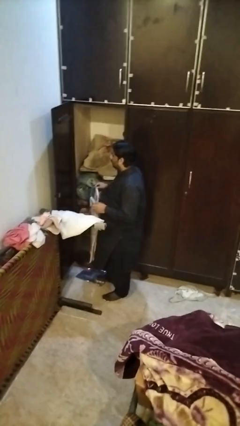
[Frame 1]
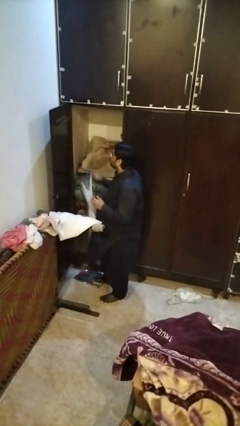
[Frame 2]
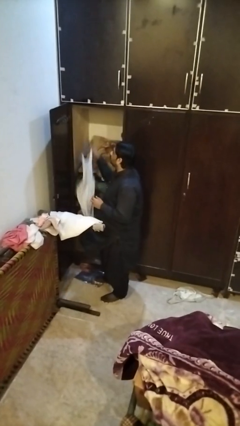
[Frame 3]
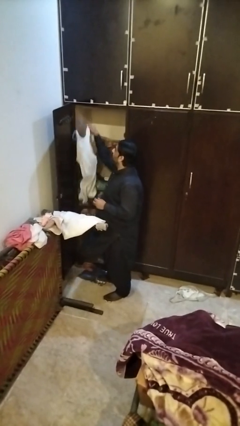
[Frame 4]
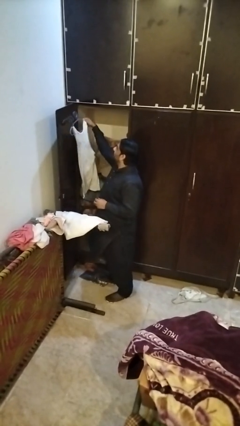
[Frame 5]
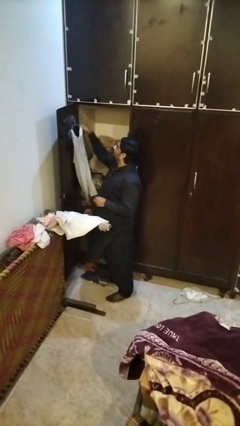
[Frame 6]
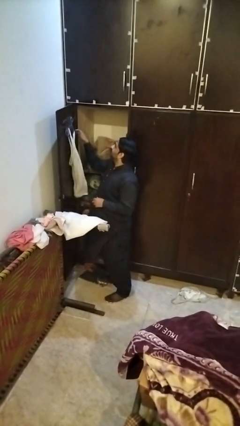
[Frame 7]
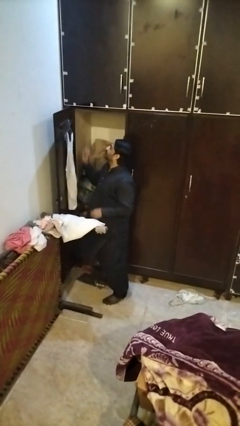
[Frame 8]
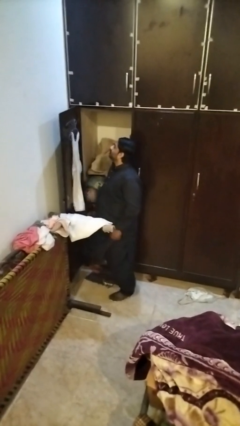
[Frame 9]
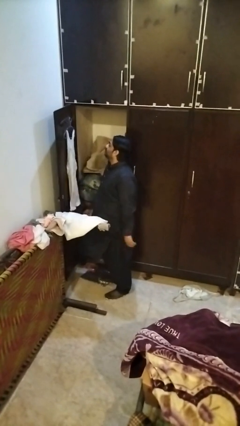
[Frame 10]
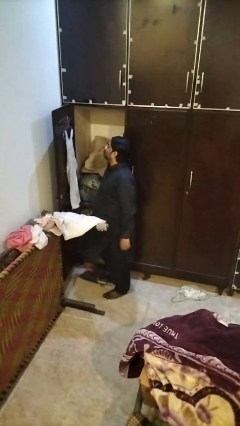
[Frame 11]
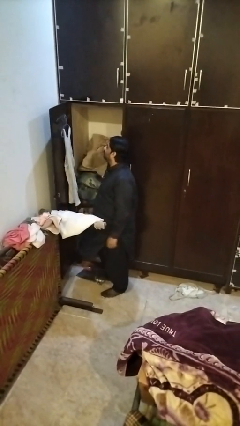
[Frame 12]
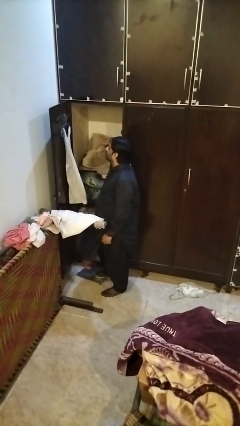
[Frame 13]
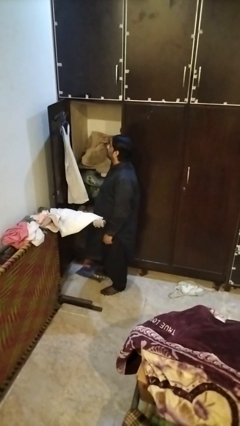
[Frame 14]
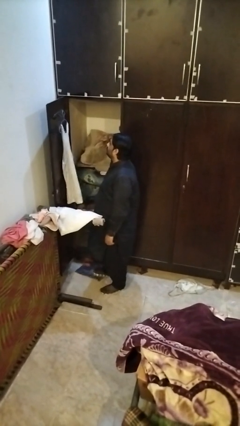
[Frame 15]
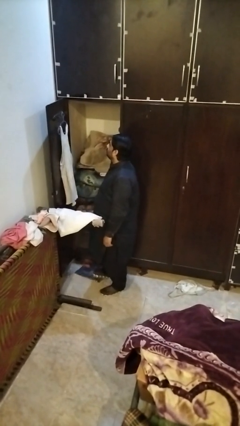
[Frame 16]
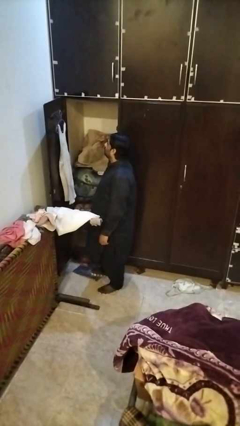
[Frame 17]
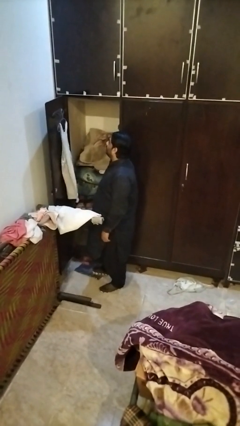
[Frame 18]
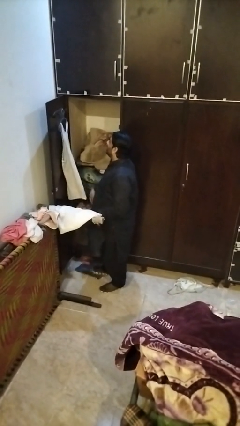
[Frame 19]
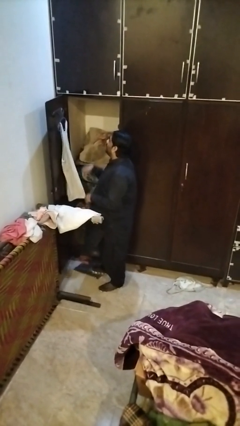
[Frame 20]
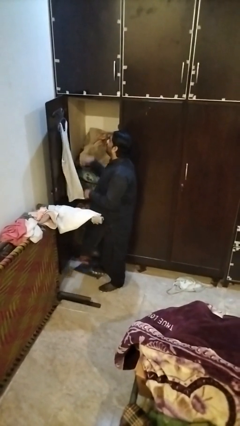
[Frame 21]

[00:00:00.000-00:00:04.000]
person puts clothes into closet

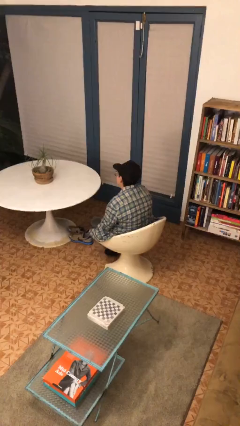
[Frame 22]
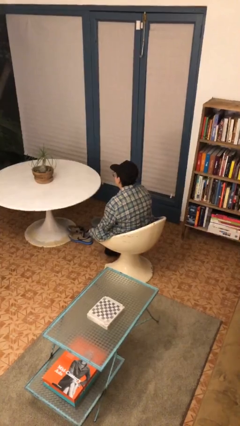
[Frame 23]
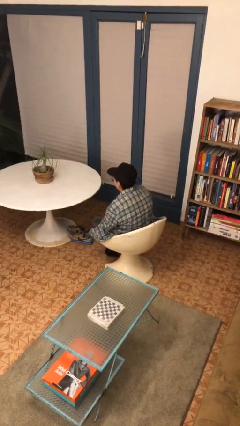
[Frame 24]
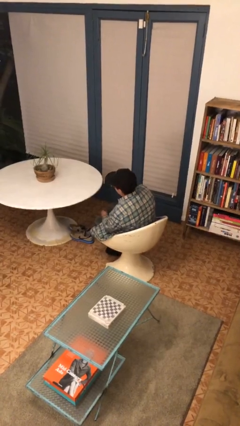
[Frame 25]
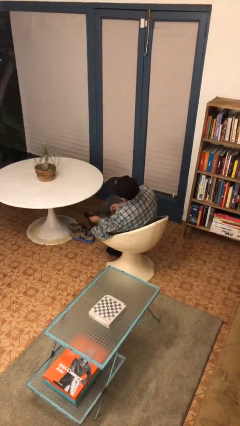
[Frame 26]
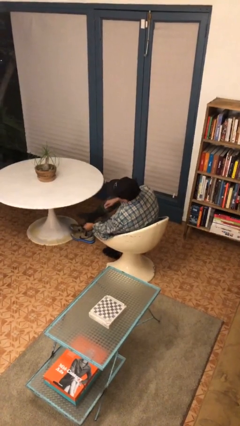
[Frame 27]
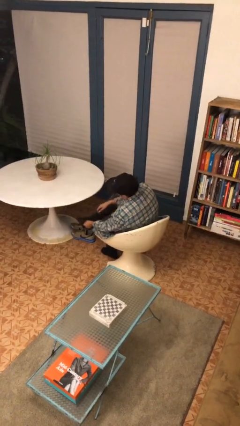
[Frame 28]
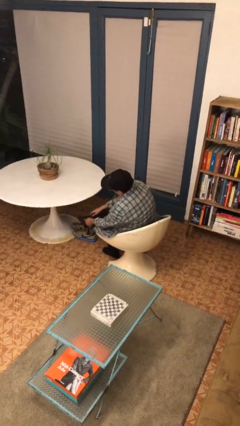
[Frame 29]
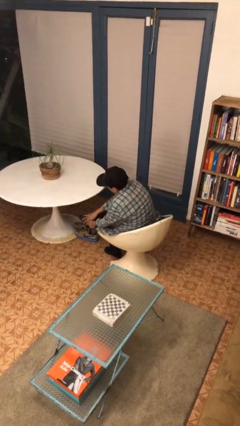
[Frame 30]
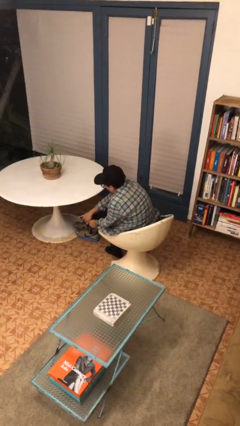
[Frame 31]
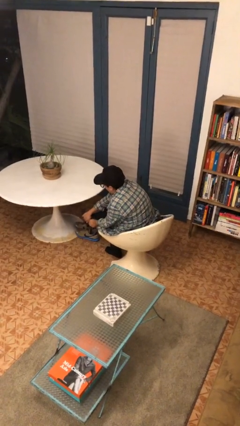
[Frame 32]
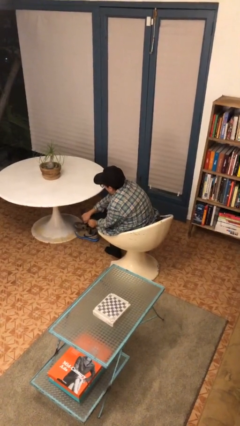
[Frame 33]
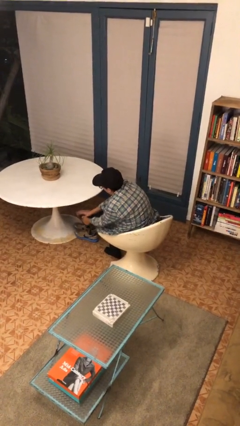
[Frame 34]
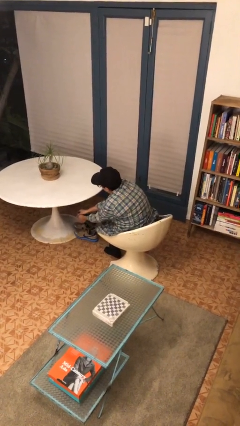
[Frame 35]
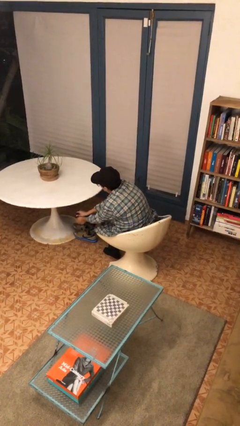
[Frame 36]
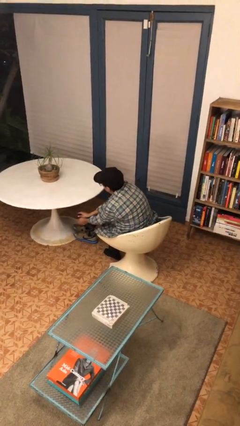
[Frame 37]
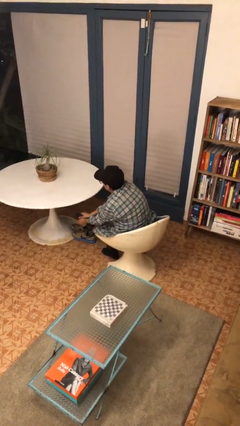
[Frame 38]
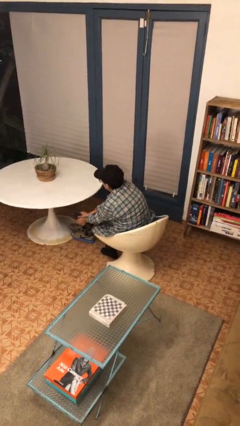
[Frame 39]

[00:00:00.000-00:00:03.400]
person rubs foot

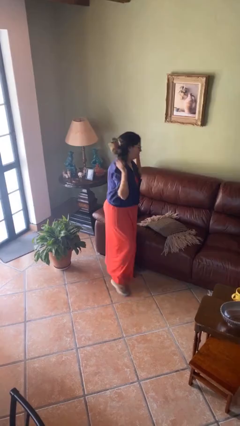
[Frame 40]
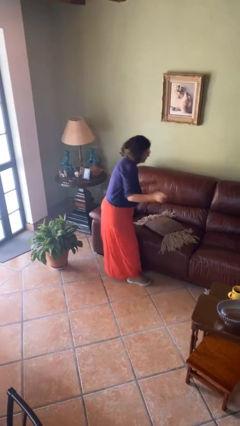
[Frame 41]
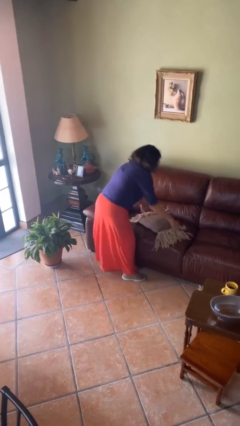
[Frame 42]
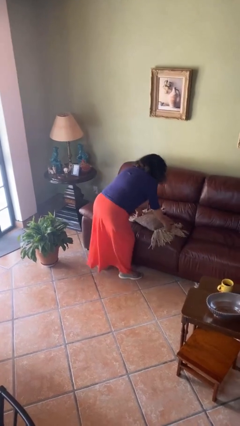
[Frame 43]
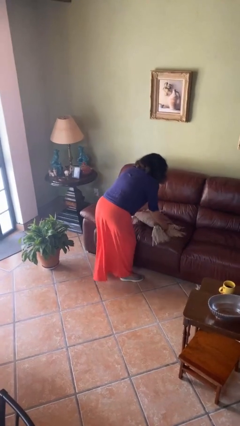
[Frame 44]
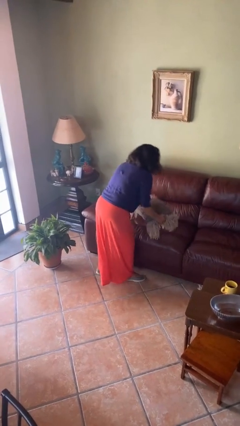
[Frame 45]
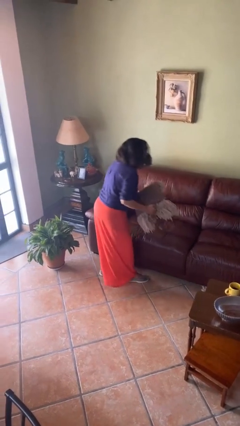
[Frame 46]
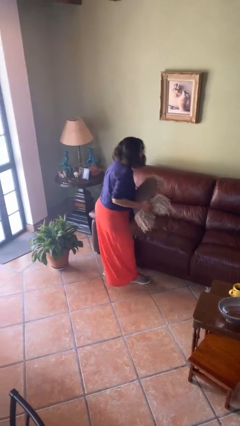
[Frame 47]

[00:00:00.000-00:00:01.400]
person picks up object from couch

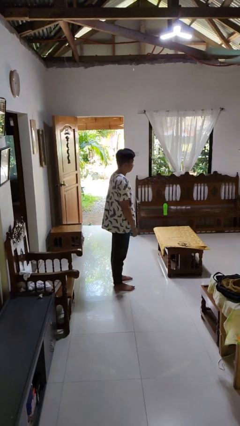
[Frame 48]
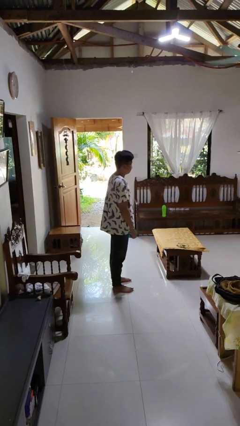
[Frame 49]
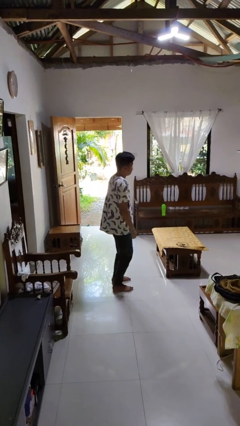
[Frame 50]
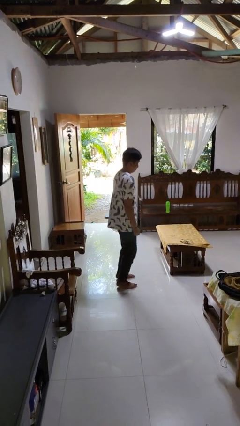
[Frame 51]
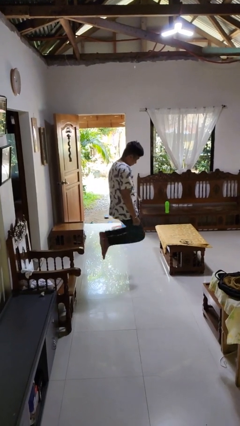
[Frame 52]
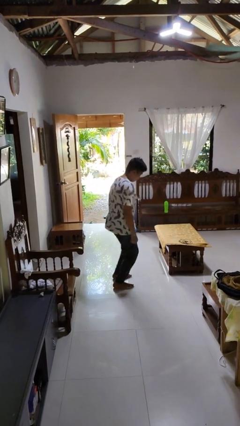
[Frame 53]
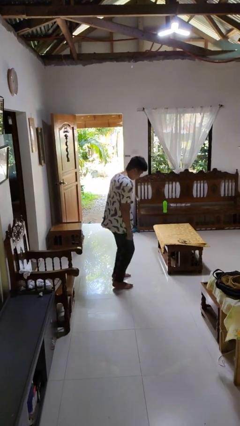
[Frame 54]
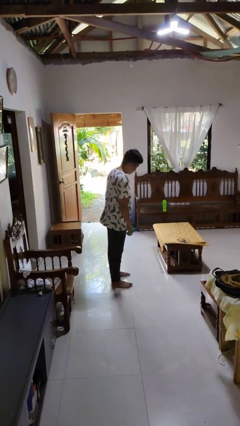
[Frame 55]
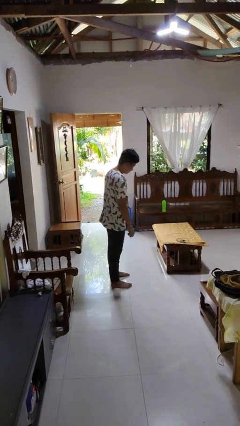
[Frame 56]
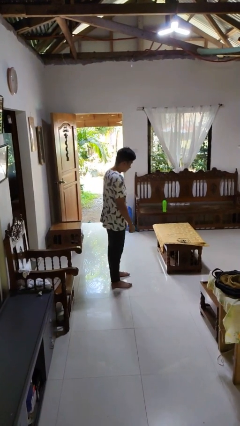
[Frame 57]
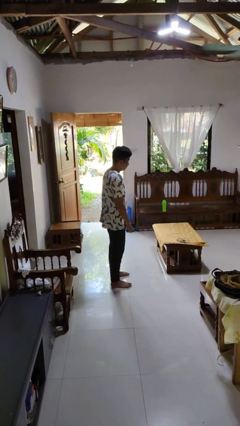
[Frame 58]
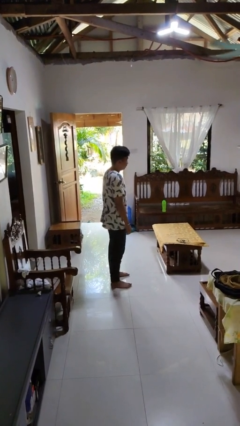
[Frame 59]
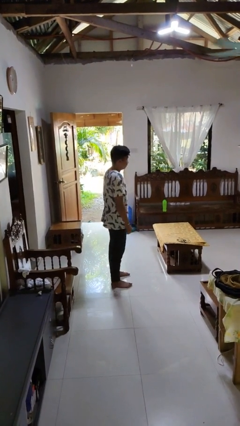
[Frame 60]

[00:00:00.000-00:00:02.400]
person jumps

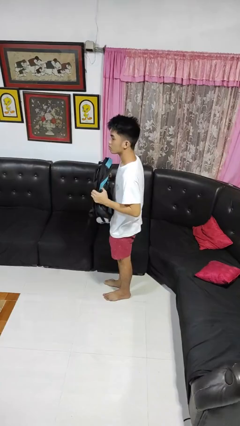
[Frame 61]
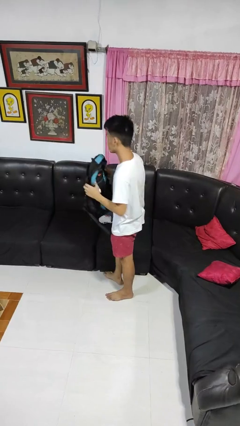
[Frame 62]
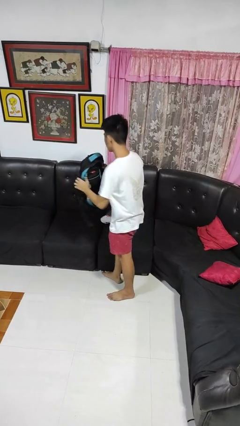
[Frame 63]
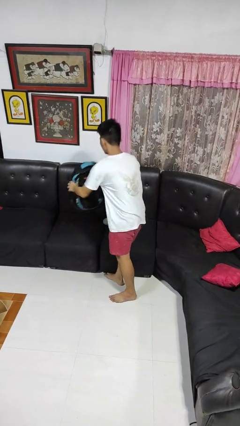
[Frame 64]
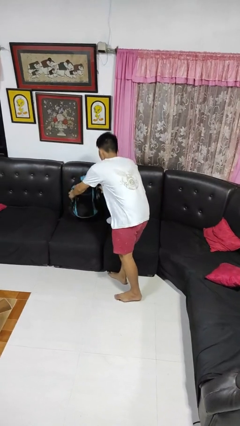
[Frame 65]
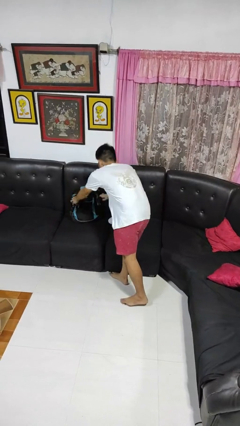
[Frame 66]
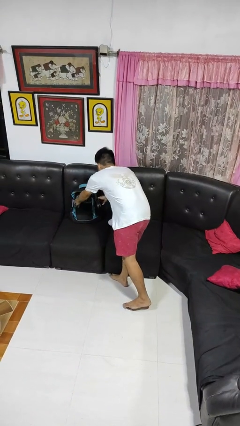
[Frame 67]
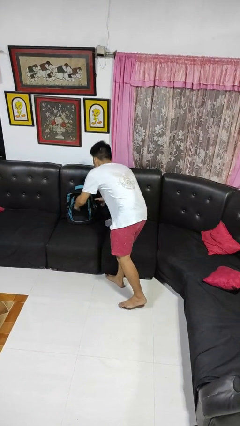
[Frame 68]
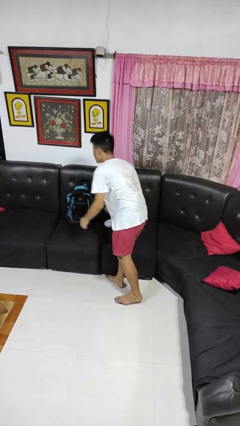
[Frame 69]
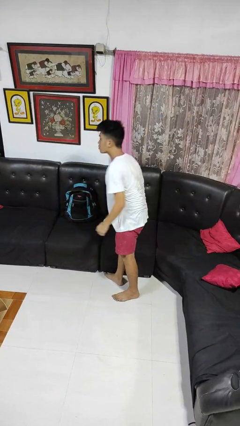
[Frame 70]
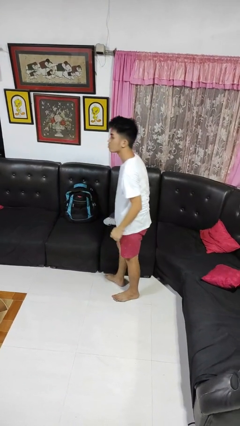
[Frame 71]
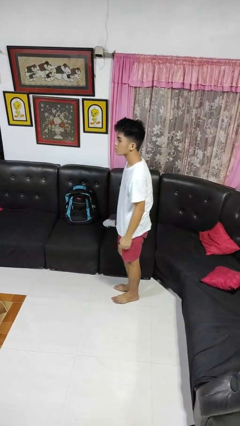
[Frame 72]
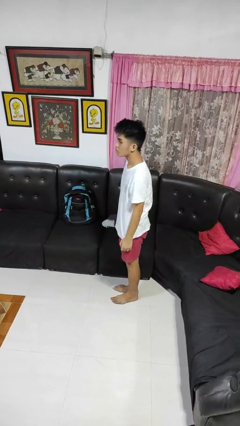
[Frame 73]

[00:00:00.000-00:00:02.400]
person puts down object on couch

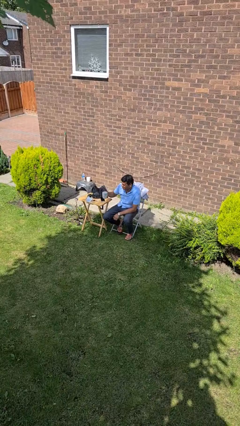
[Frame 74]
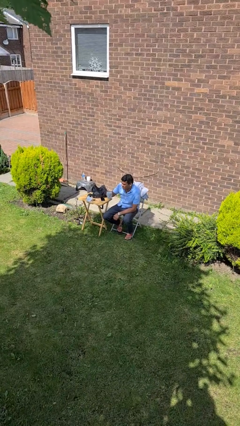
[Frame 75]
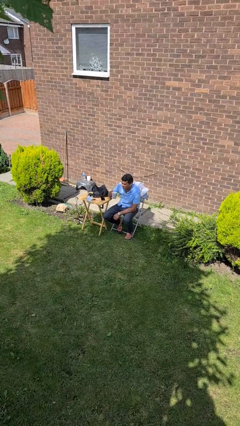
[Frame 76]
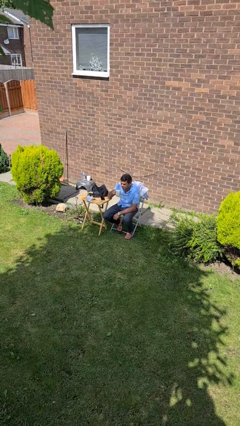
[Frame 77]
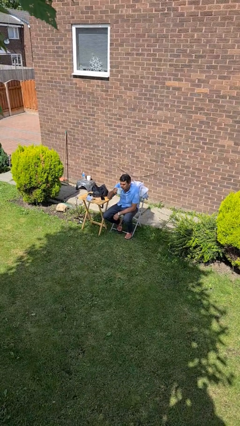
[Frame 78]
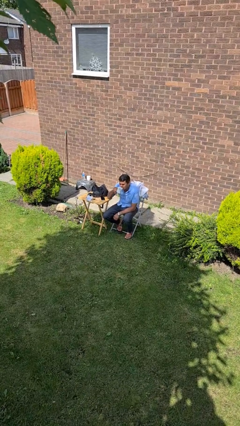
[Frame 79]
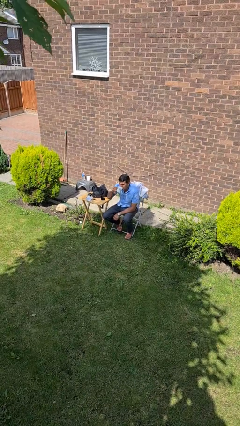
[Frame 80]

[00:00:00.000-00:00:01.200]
person drinks from mug

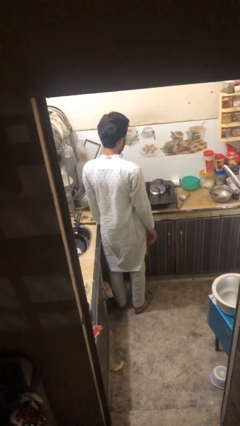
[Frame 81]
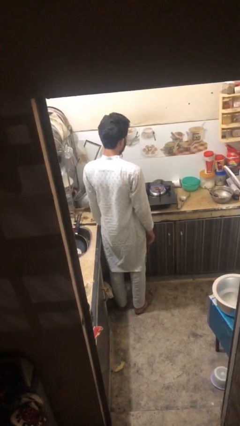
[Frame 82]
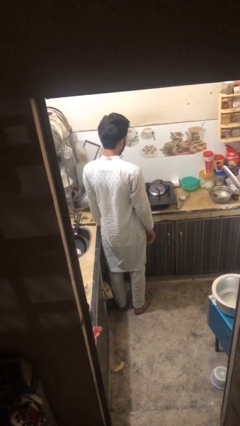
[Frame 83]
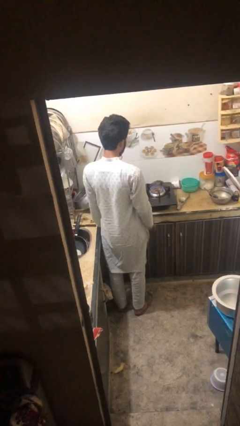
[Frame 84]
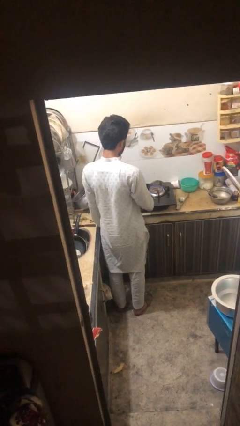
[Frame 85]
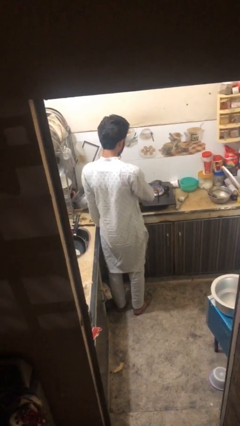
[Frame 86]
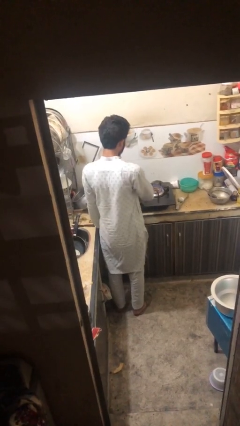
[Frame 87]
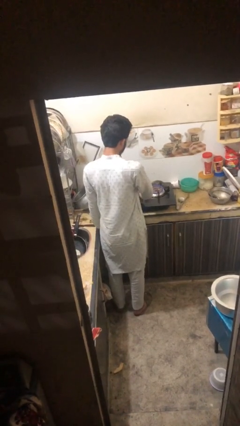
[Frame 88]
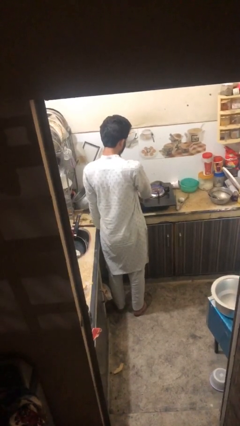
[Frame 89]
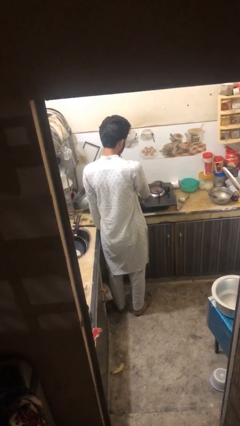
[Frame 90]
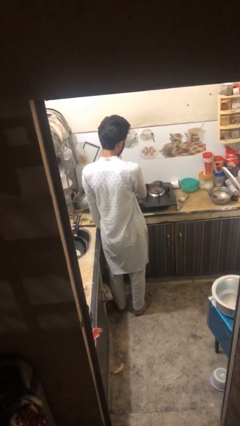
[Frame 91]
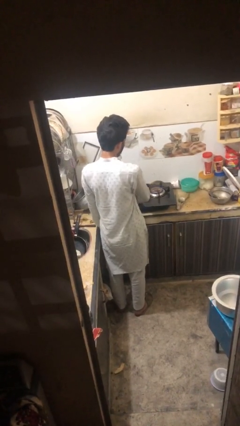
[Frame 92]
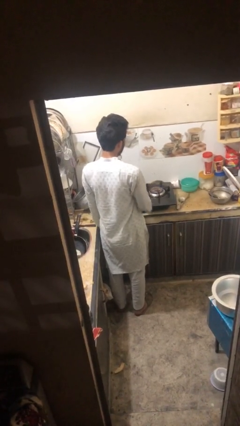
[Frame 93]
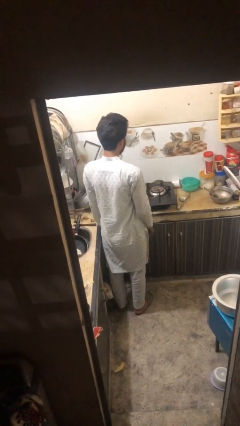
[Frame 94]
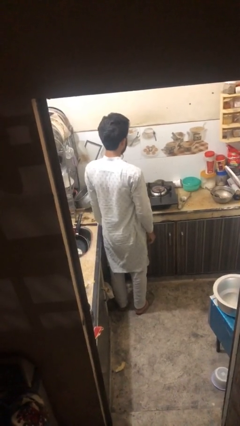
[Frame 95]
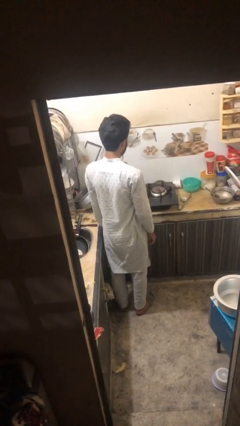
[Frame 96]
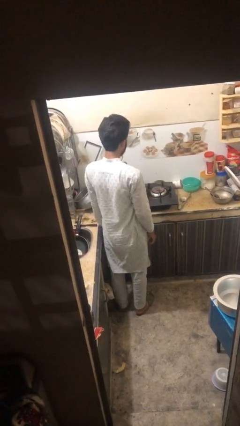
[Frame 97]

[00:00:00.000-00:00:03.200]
person turns off stovetop
